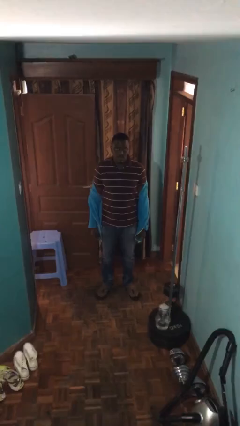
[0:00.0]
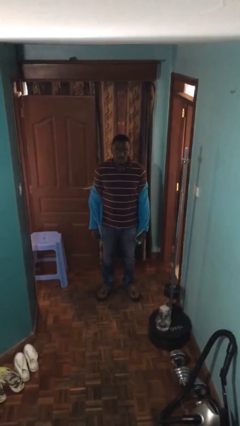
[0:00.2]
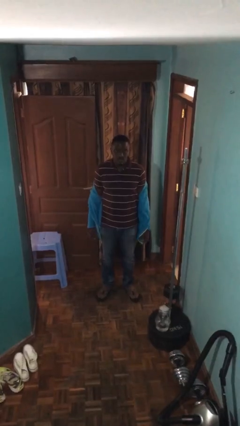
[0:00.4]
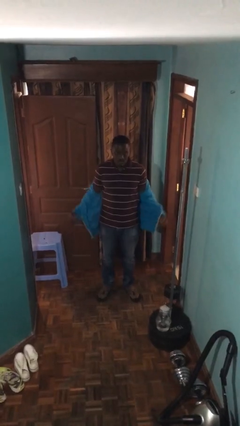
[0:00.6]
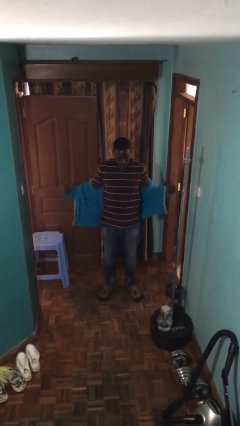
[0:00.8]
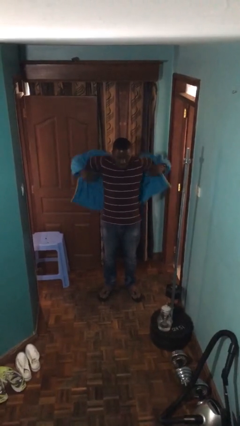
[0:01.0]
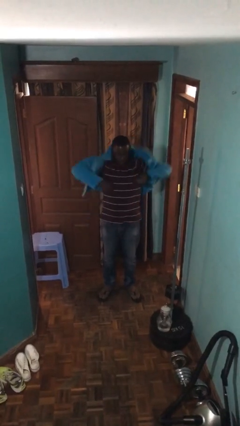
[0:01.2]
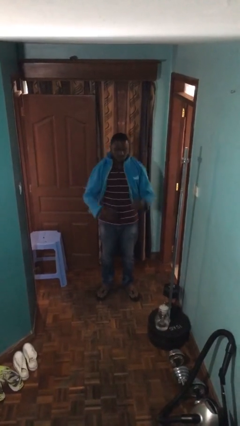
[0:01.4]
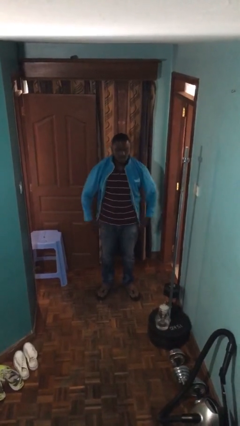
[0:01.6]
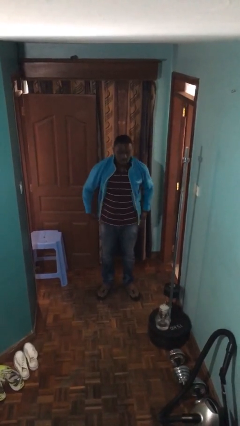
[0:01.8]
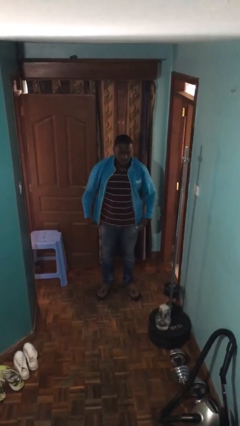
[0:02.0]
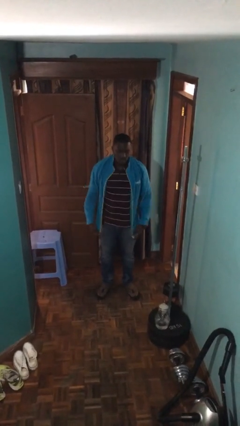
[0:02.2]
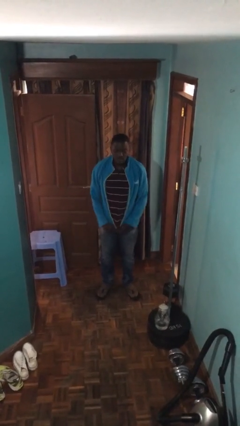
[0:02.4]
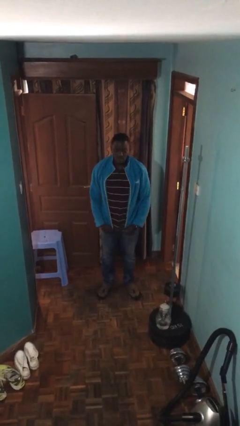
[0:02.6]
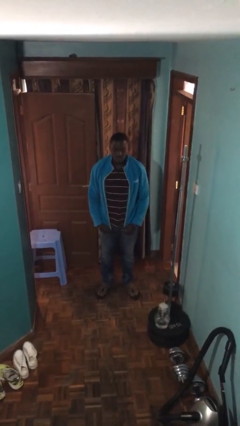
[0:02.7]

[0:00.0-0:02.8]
person puts on jacket

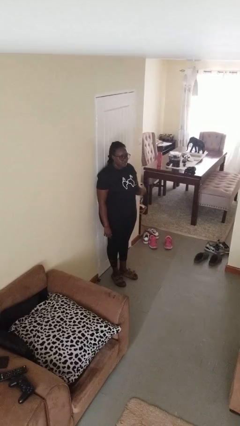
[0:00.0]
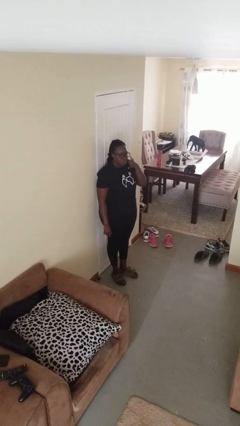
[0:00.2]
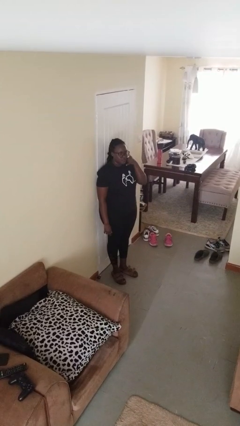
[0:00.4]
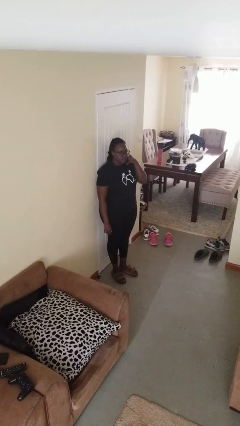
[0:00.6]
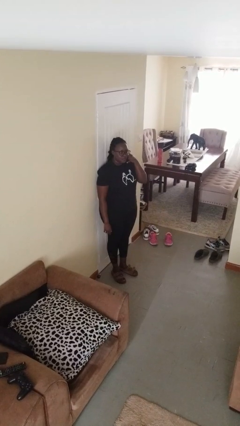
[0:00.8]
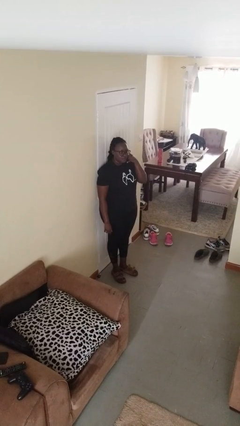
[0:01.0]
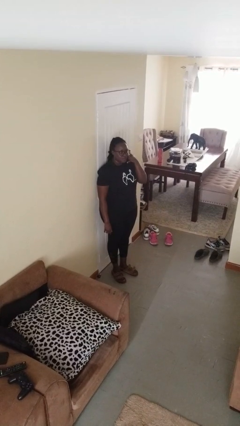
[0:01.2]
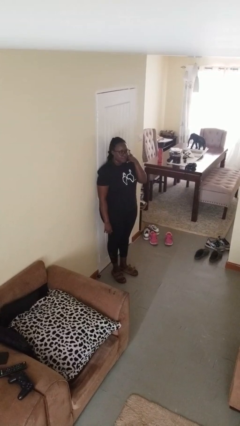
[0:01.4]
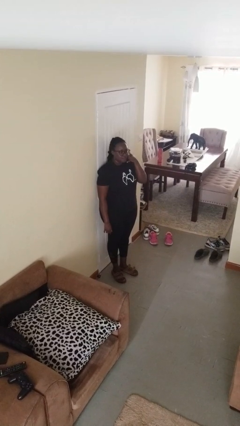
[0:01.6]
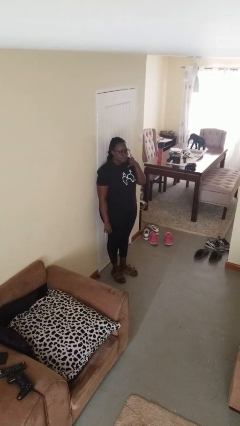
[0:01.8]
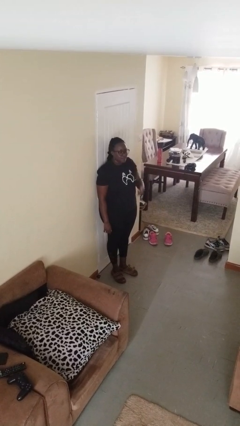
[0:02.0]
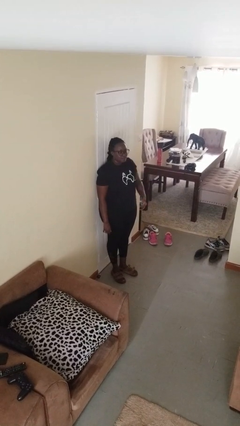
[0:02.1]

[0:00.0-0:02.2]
person gestures call me

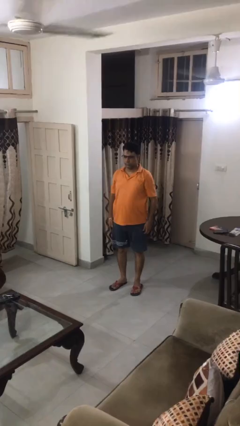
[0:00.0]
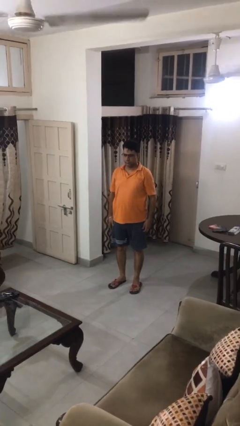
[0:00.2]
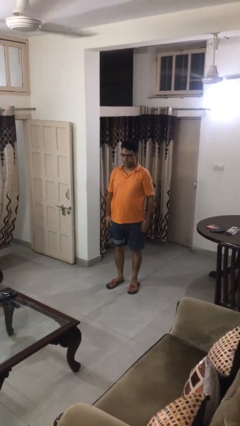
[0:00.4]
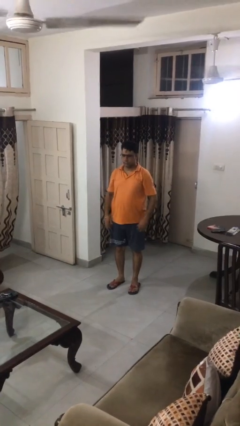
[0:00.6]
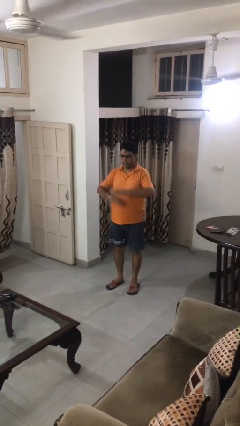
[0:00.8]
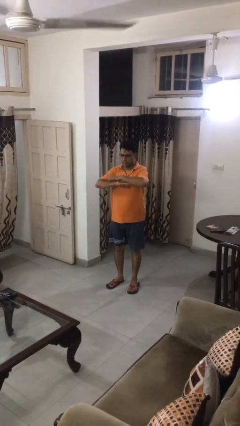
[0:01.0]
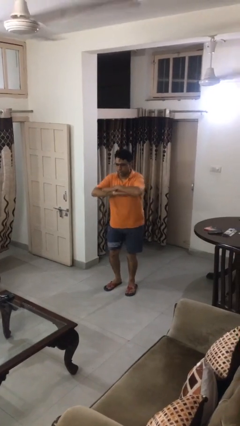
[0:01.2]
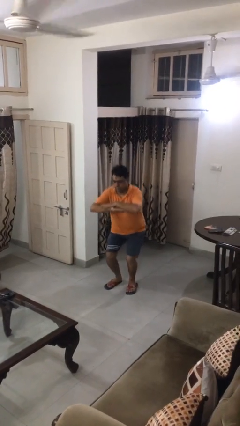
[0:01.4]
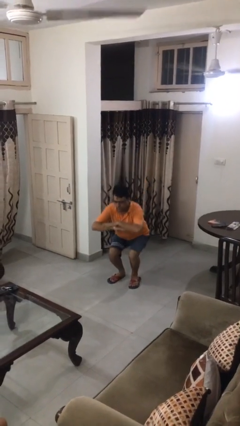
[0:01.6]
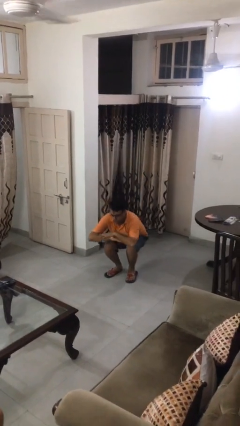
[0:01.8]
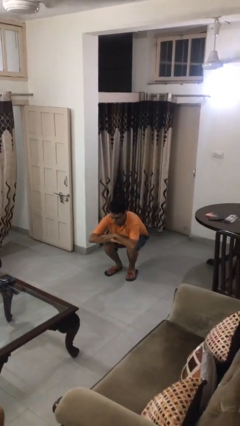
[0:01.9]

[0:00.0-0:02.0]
person squats

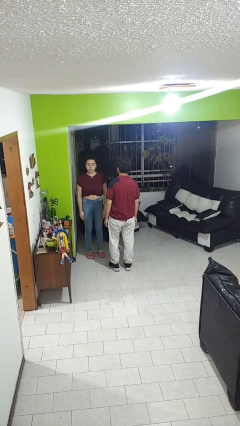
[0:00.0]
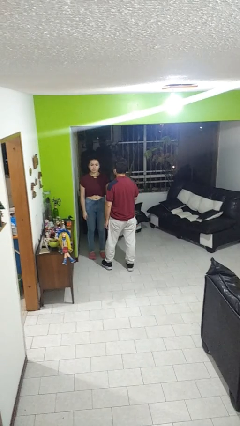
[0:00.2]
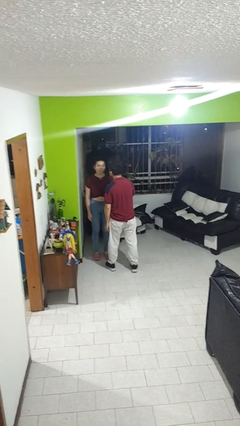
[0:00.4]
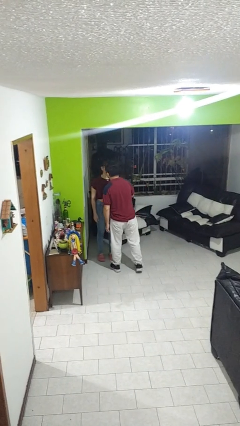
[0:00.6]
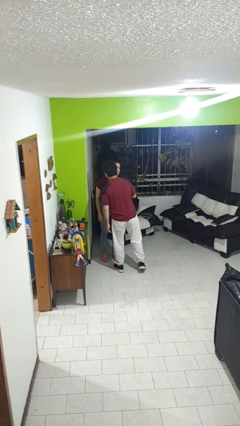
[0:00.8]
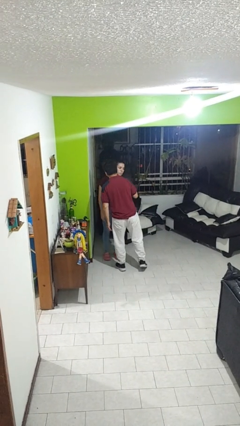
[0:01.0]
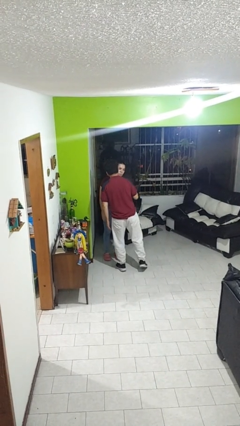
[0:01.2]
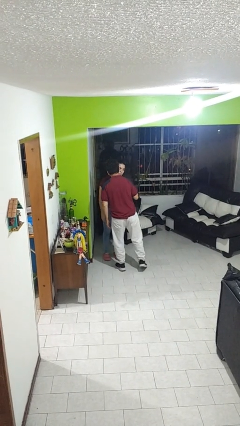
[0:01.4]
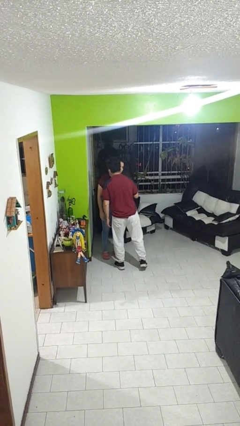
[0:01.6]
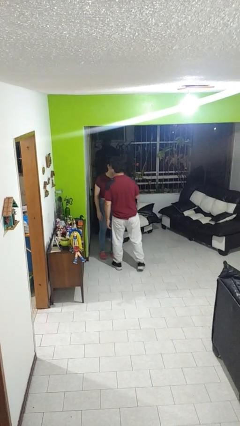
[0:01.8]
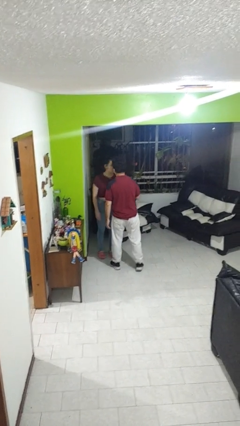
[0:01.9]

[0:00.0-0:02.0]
person kisses cheek of person

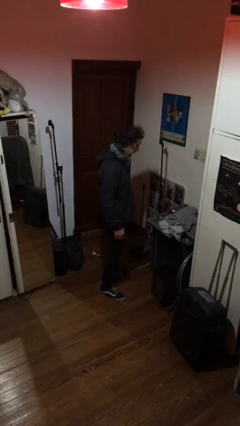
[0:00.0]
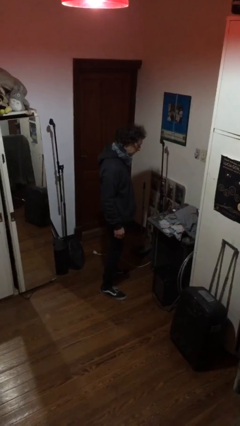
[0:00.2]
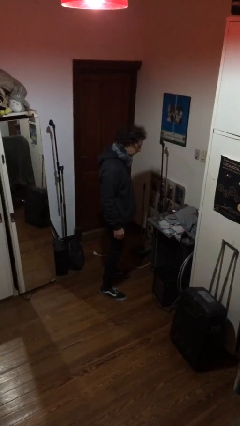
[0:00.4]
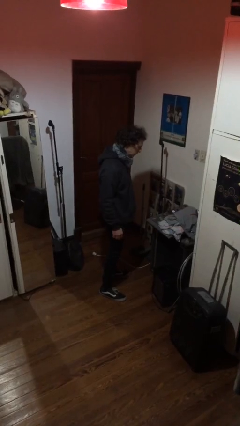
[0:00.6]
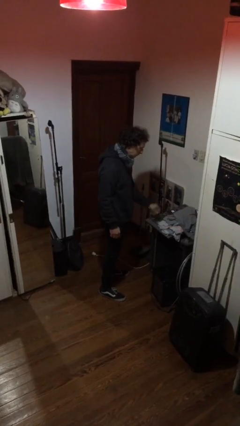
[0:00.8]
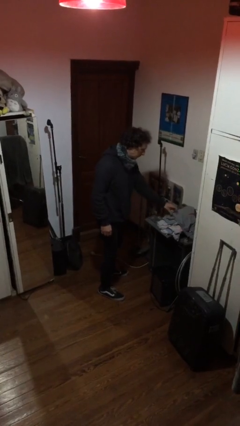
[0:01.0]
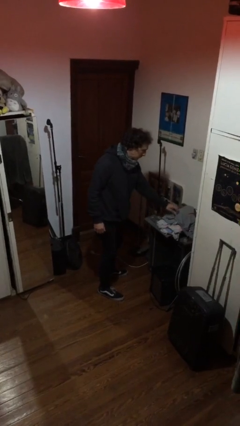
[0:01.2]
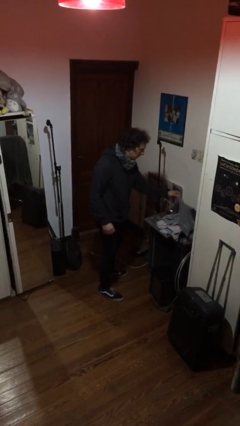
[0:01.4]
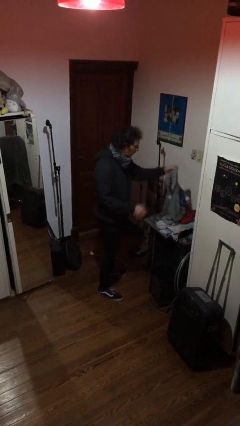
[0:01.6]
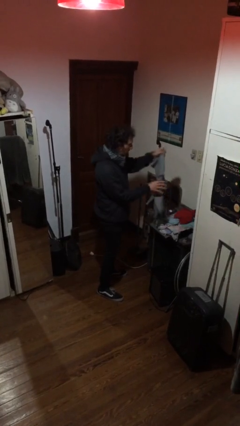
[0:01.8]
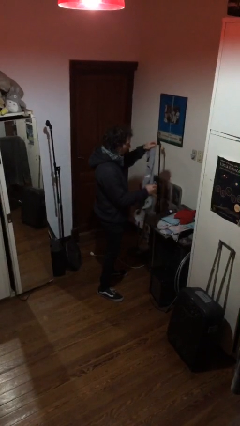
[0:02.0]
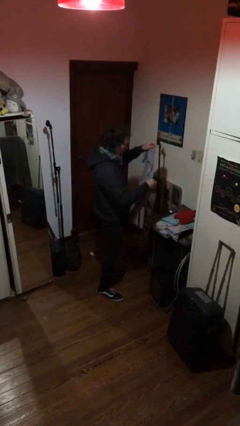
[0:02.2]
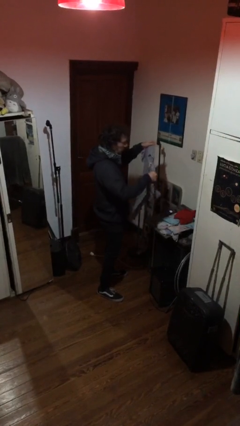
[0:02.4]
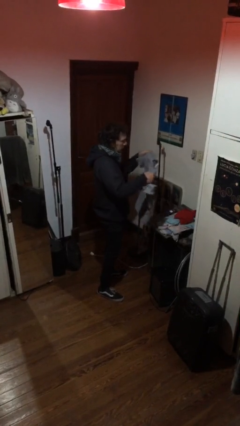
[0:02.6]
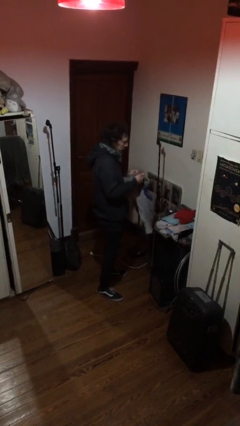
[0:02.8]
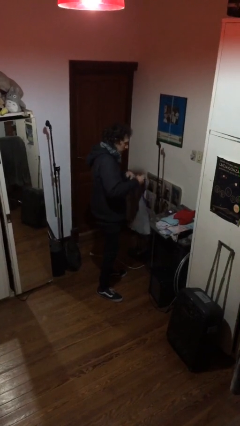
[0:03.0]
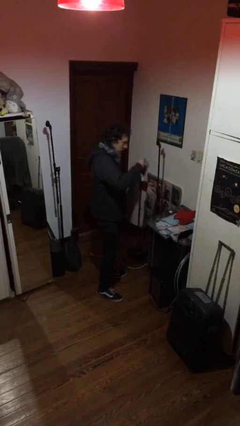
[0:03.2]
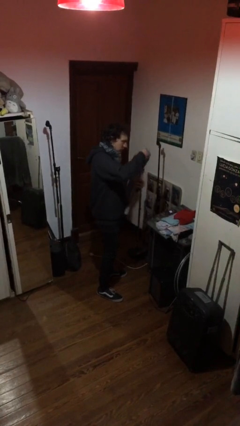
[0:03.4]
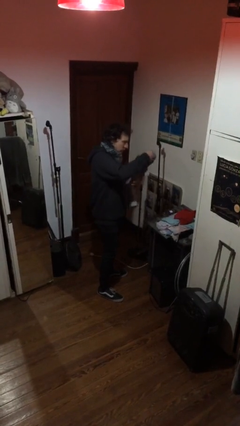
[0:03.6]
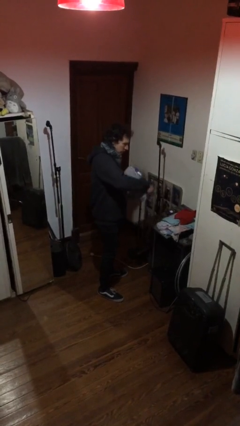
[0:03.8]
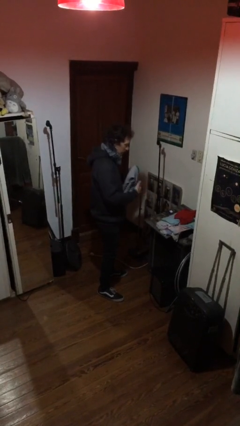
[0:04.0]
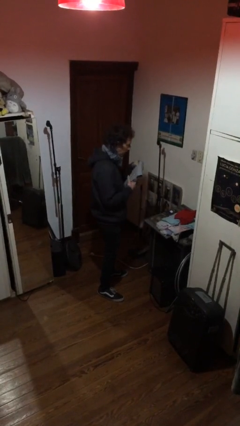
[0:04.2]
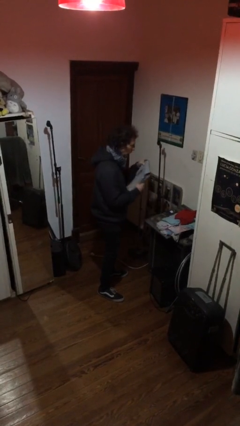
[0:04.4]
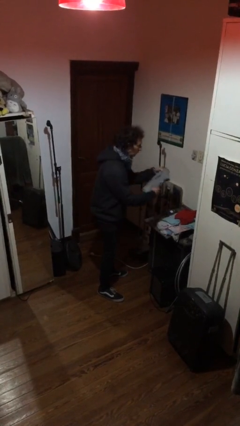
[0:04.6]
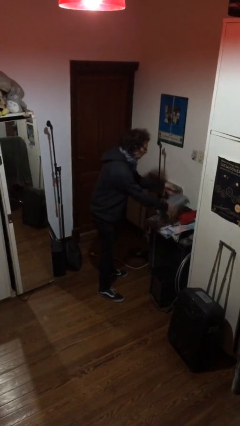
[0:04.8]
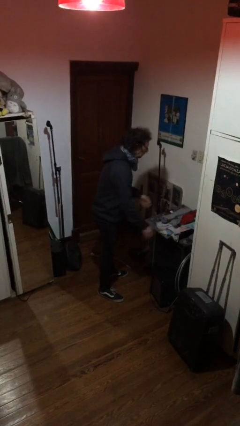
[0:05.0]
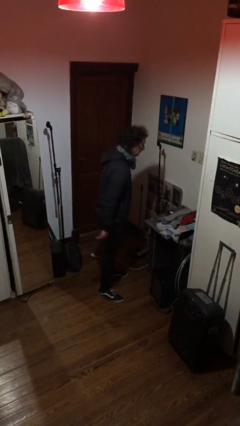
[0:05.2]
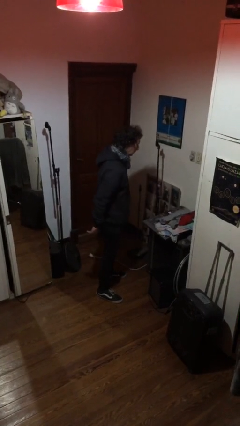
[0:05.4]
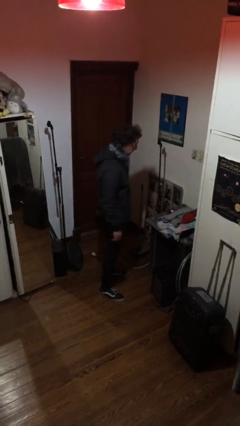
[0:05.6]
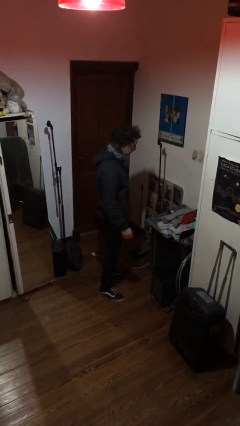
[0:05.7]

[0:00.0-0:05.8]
person folds shirt

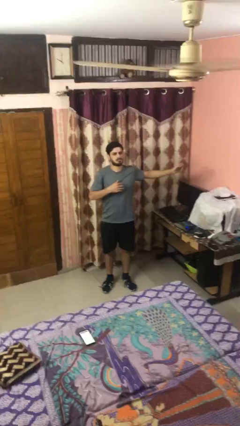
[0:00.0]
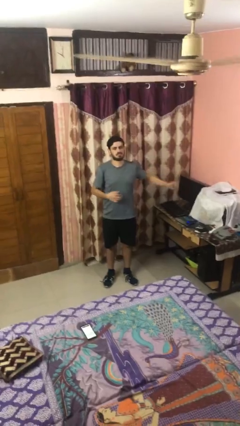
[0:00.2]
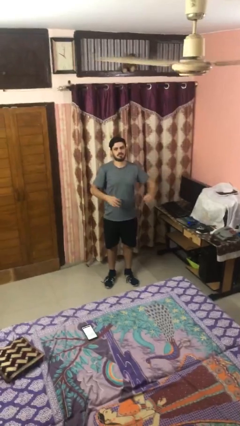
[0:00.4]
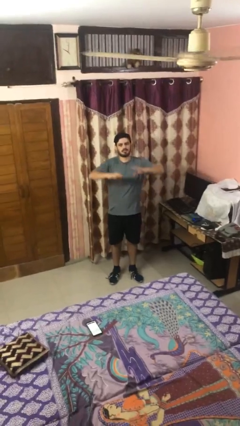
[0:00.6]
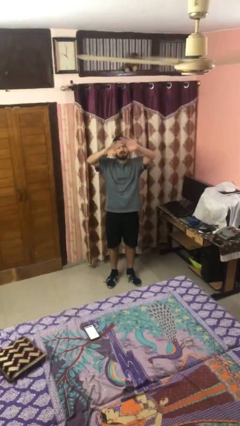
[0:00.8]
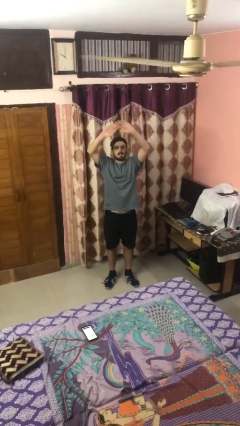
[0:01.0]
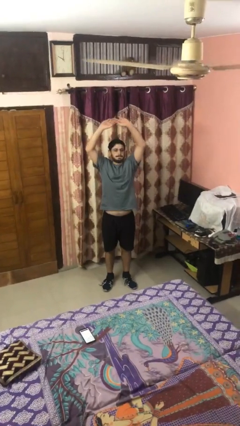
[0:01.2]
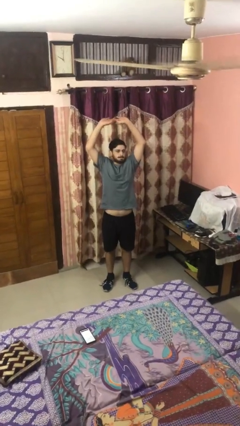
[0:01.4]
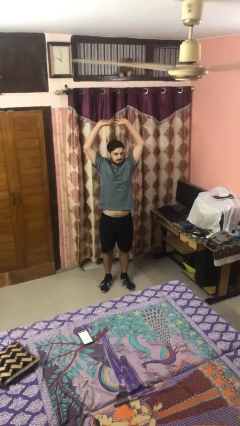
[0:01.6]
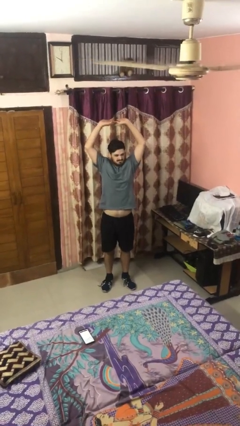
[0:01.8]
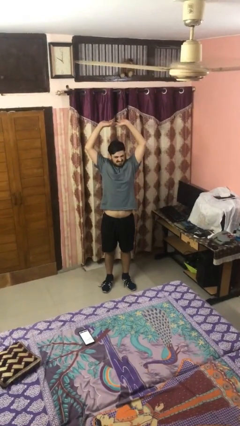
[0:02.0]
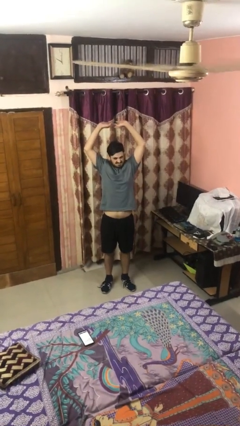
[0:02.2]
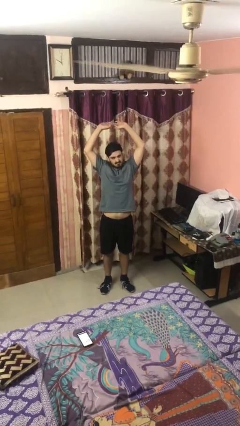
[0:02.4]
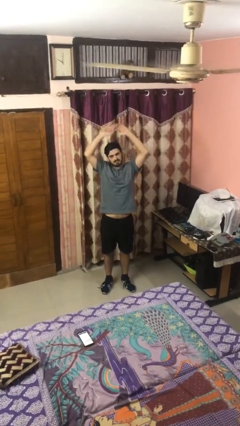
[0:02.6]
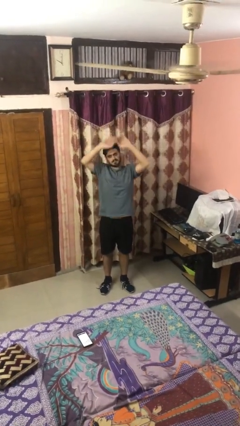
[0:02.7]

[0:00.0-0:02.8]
person stretches arms over head
